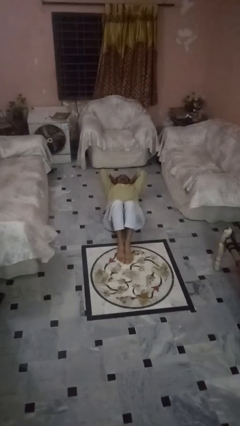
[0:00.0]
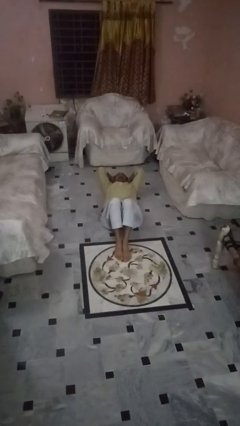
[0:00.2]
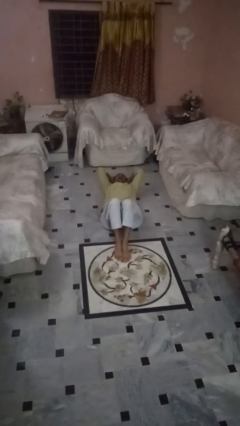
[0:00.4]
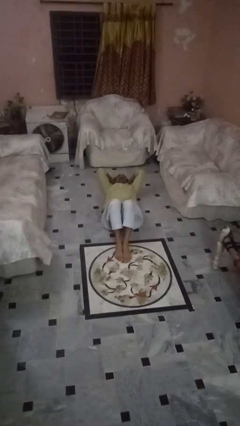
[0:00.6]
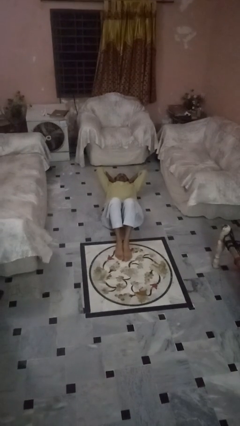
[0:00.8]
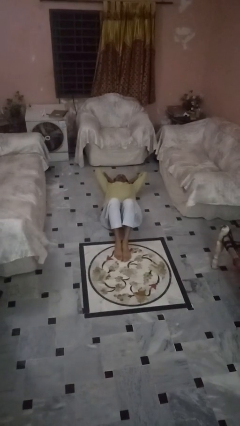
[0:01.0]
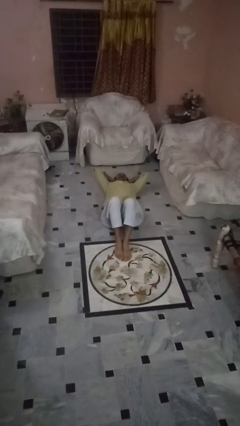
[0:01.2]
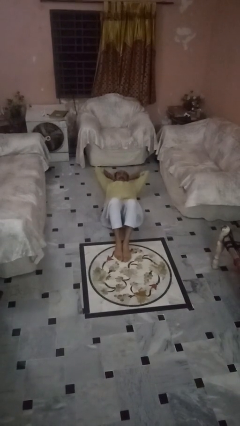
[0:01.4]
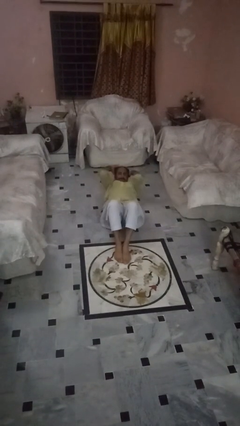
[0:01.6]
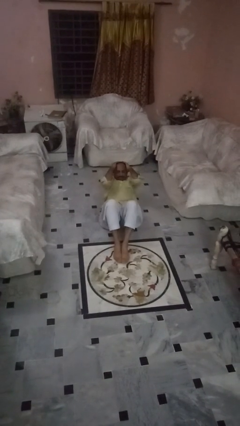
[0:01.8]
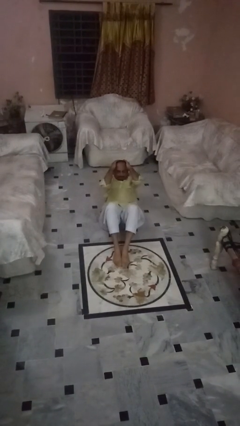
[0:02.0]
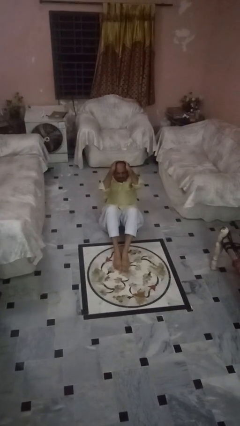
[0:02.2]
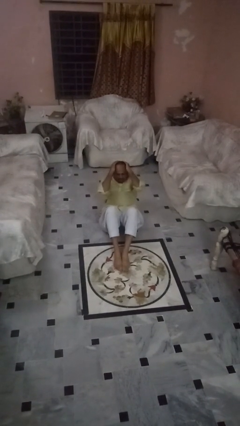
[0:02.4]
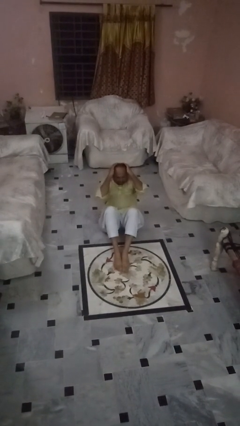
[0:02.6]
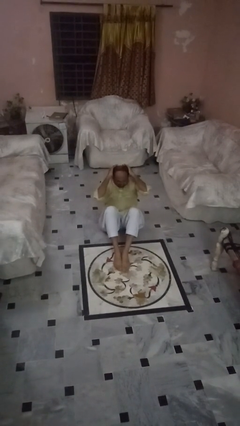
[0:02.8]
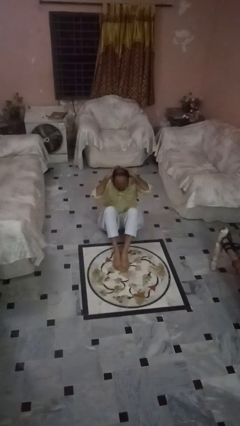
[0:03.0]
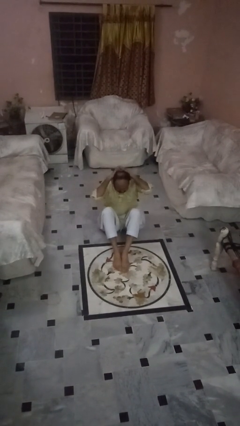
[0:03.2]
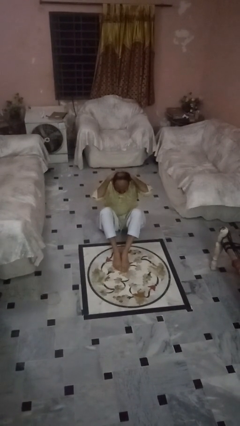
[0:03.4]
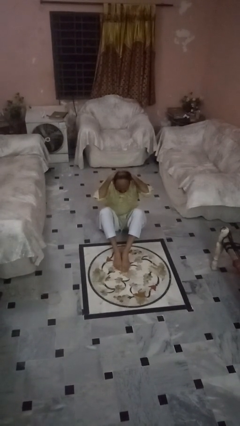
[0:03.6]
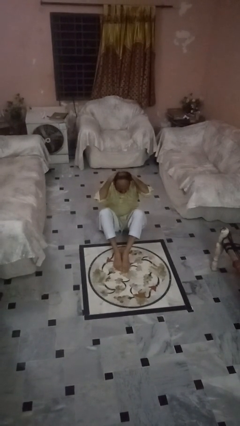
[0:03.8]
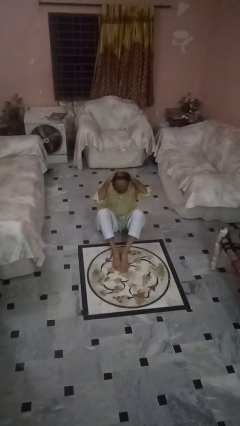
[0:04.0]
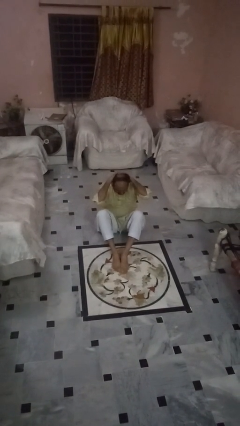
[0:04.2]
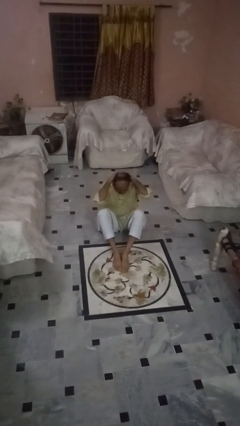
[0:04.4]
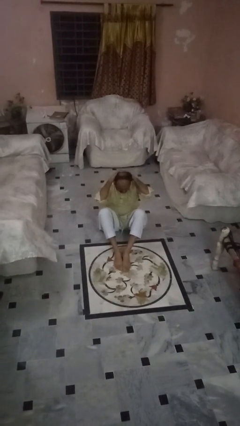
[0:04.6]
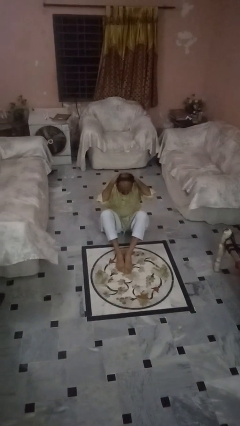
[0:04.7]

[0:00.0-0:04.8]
person exercises with situp

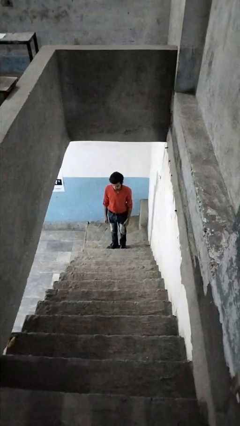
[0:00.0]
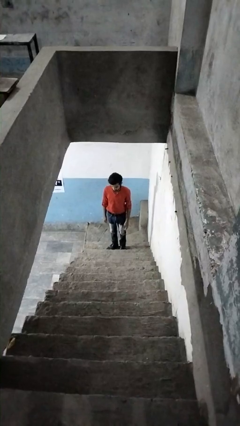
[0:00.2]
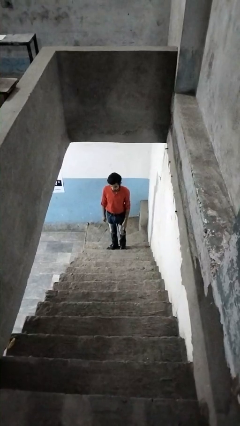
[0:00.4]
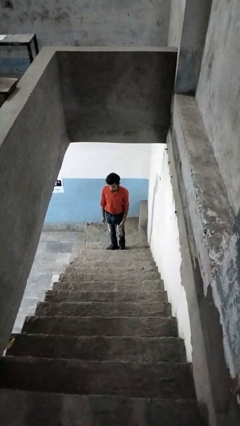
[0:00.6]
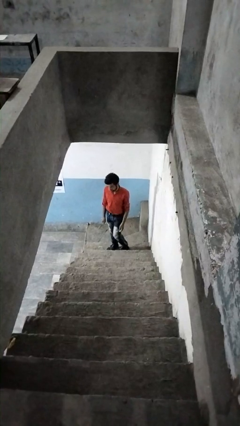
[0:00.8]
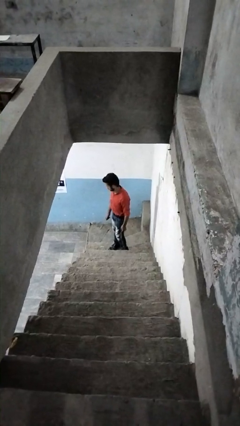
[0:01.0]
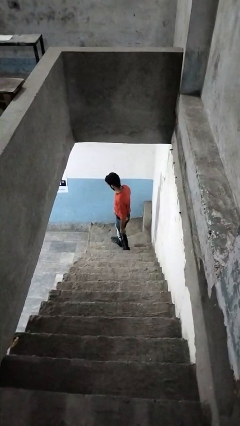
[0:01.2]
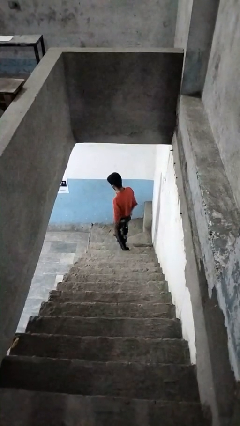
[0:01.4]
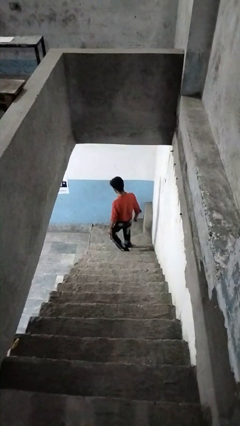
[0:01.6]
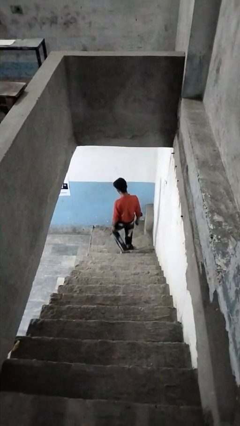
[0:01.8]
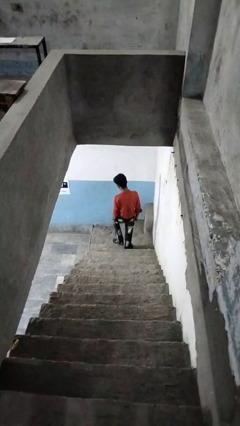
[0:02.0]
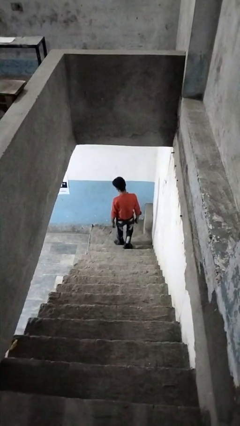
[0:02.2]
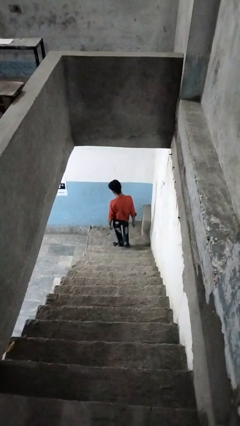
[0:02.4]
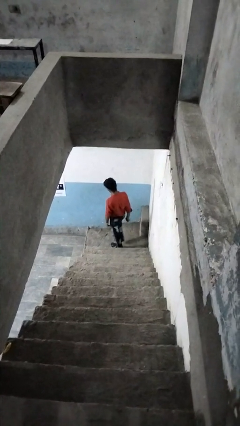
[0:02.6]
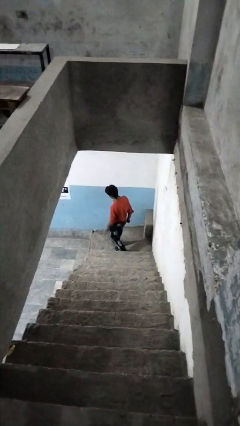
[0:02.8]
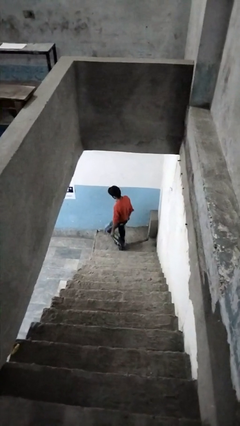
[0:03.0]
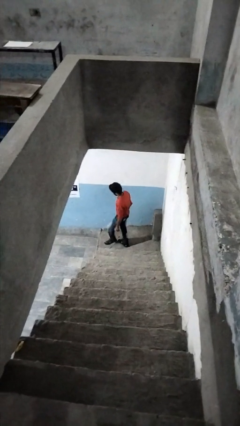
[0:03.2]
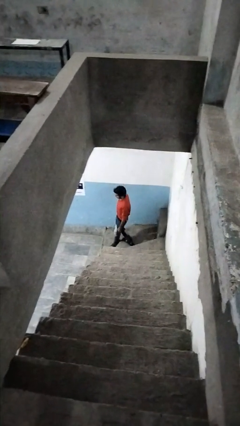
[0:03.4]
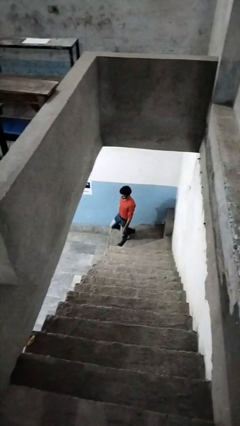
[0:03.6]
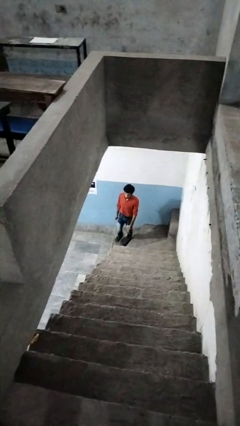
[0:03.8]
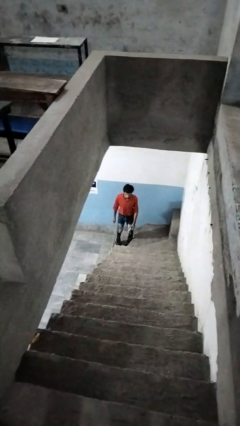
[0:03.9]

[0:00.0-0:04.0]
person climbs down stairs

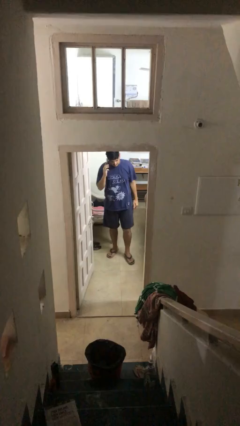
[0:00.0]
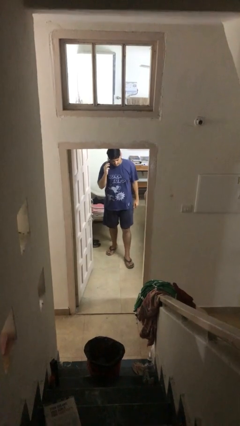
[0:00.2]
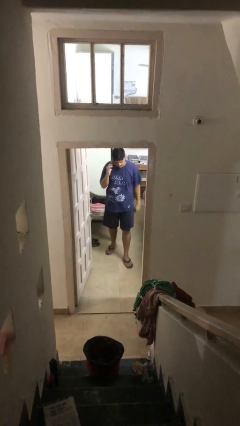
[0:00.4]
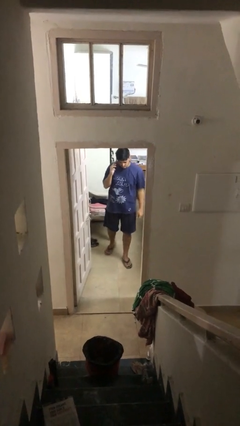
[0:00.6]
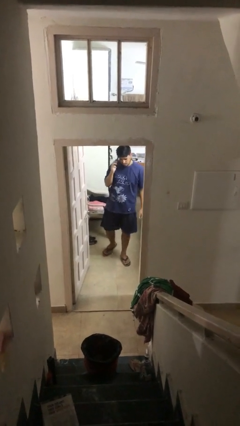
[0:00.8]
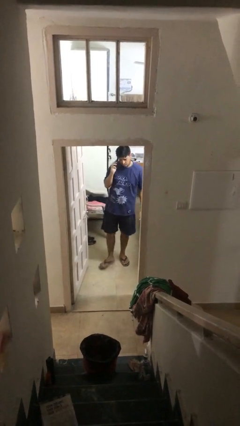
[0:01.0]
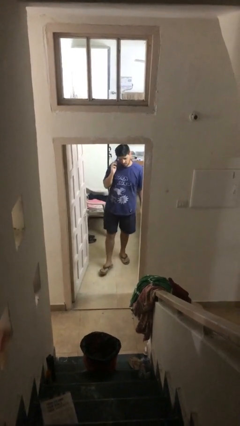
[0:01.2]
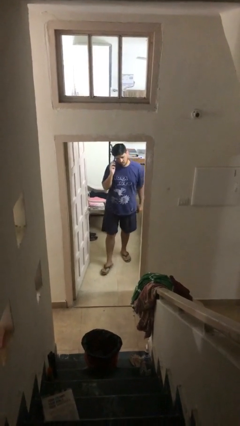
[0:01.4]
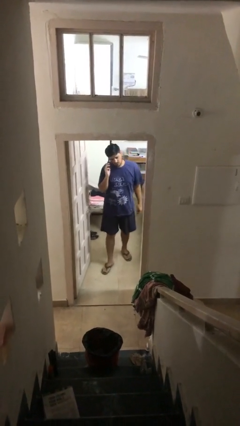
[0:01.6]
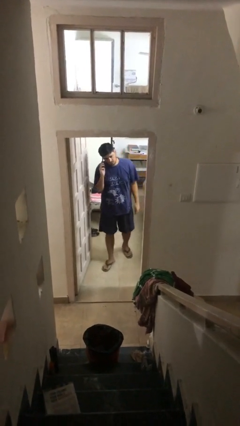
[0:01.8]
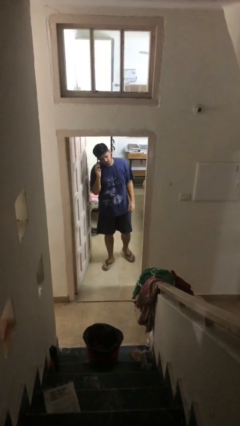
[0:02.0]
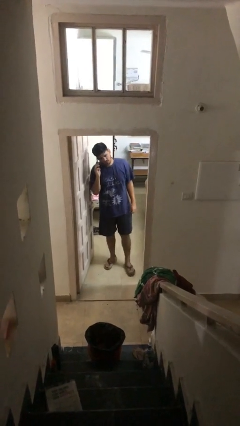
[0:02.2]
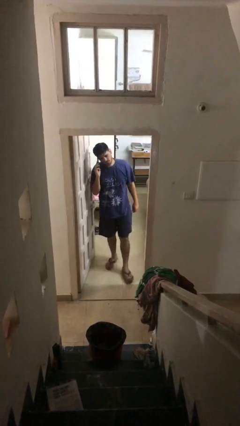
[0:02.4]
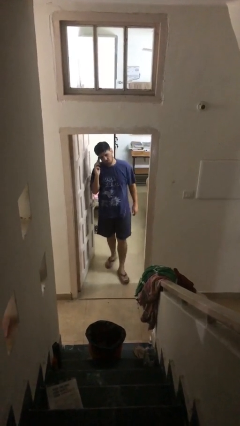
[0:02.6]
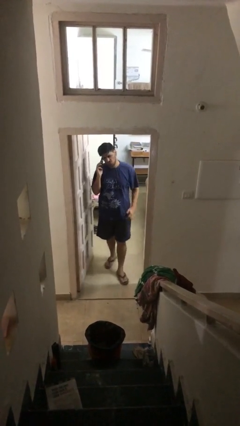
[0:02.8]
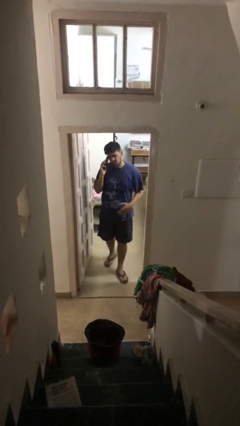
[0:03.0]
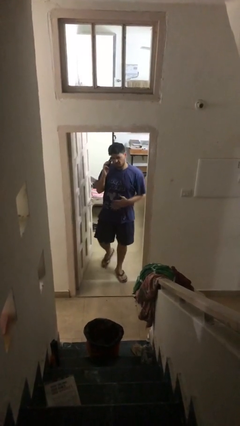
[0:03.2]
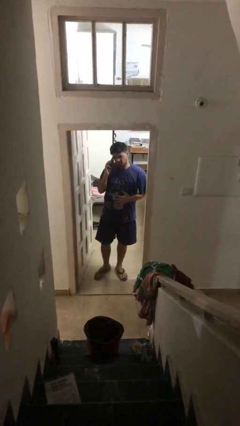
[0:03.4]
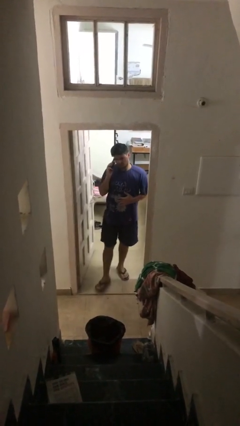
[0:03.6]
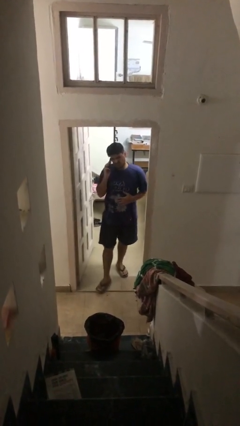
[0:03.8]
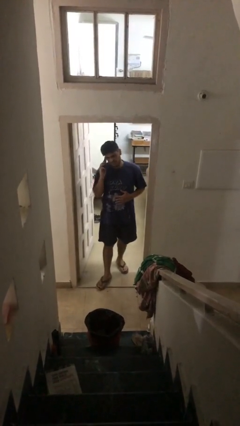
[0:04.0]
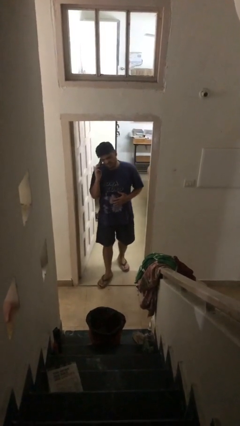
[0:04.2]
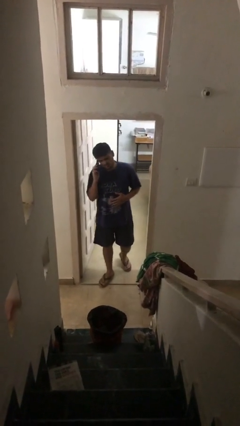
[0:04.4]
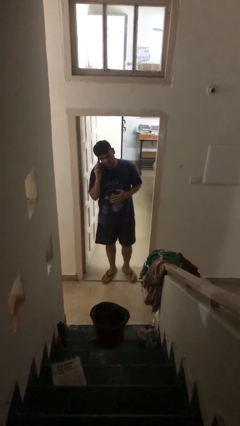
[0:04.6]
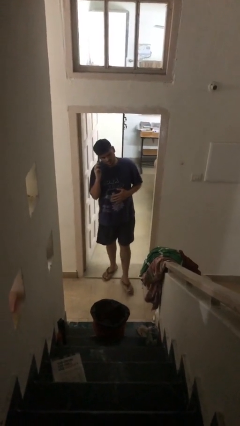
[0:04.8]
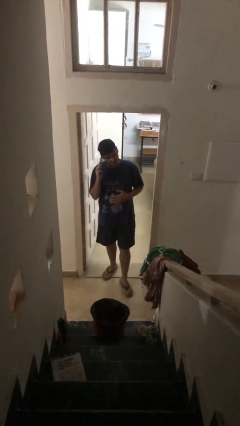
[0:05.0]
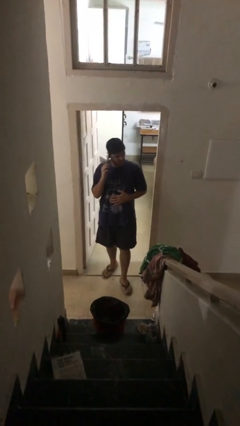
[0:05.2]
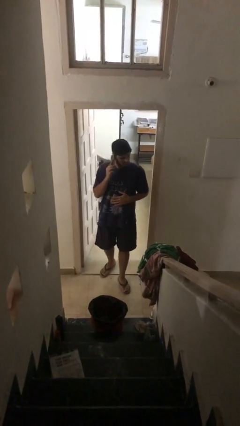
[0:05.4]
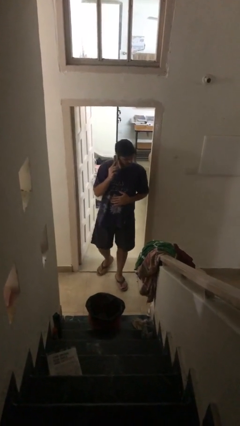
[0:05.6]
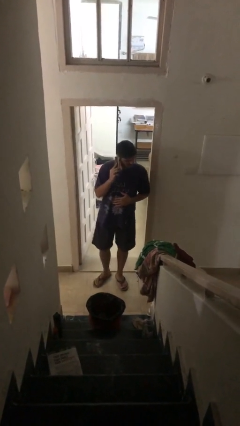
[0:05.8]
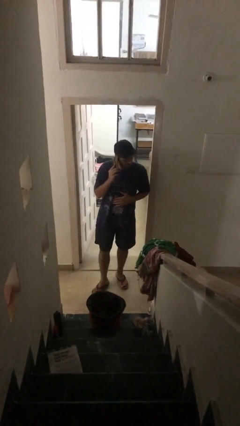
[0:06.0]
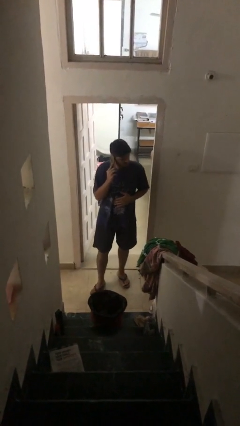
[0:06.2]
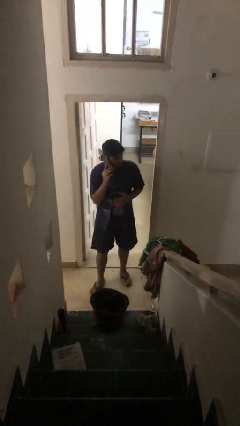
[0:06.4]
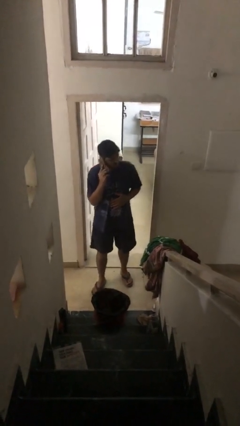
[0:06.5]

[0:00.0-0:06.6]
person enters scene through structure

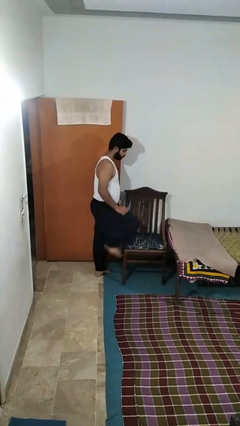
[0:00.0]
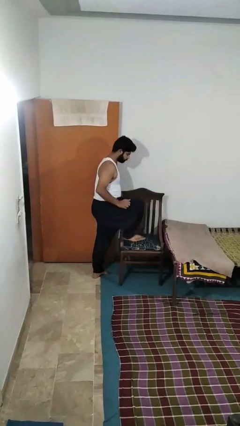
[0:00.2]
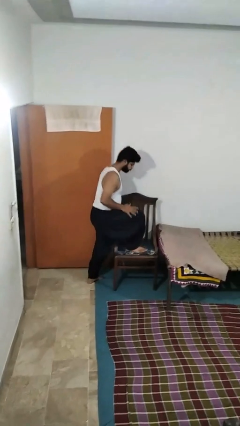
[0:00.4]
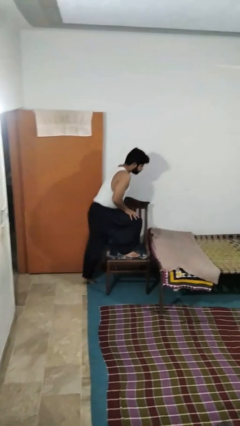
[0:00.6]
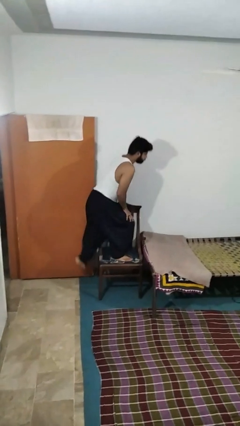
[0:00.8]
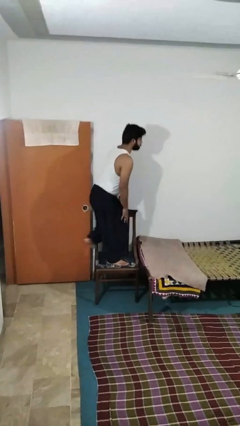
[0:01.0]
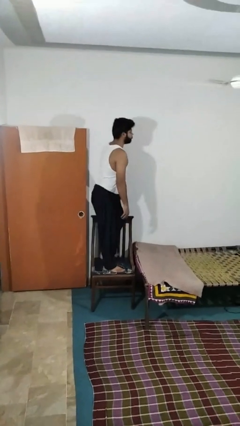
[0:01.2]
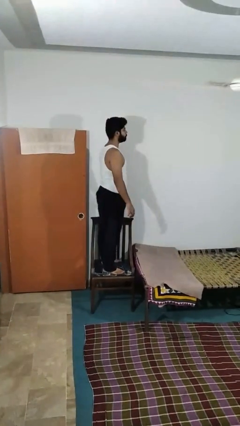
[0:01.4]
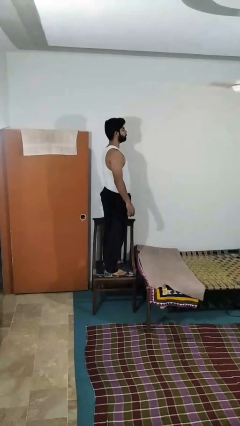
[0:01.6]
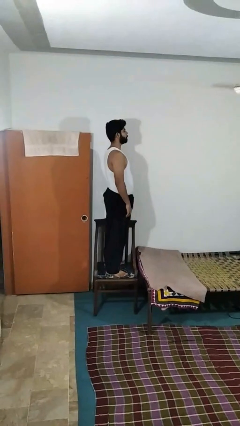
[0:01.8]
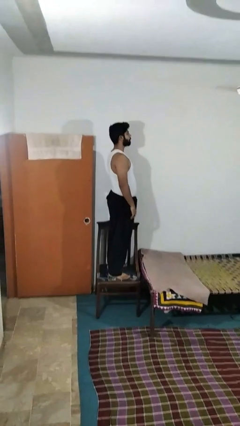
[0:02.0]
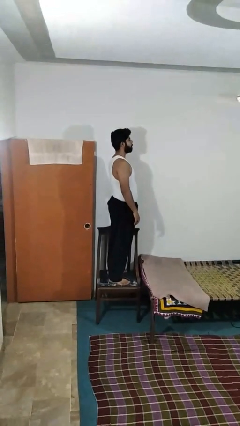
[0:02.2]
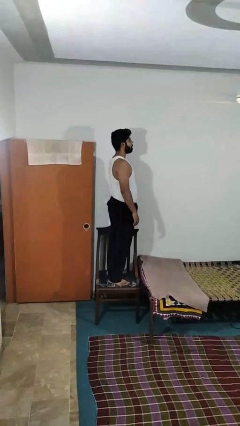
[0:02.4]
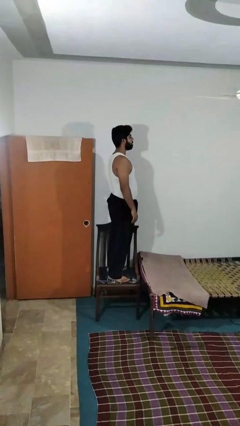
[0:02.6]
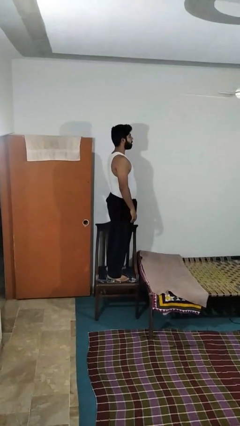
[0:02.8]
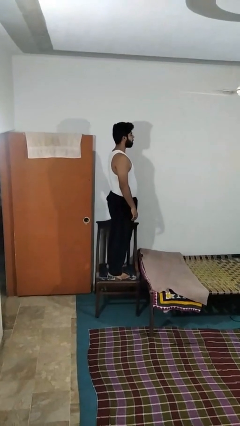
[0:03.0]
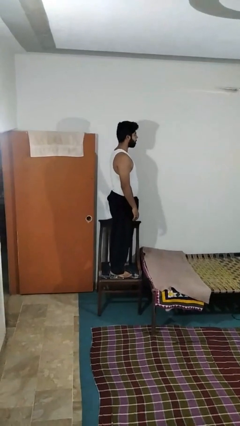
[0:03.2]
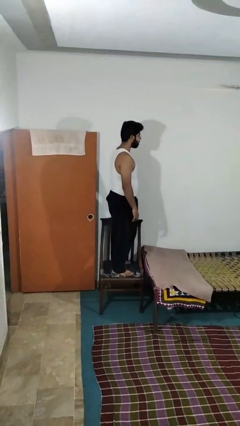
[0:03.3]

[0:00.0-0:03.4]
person climbs on chair
